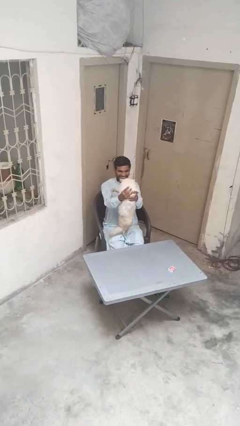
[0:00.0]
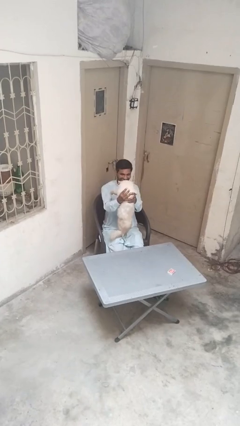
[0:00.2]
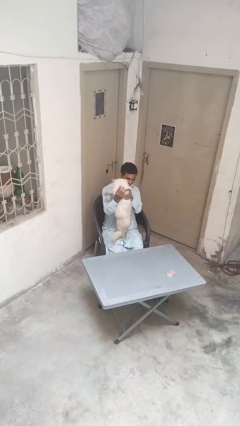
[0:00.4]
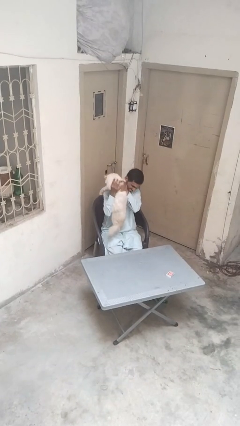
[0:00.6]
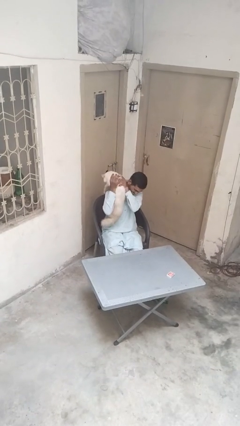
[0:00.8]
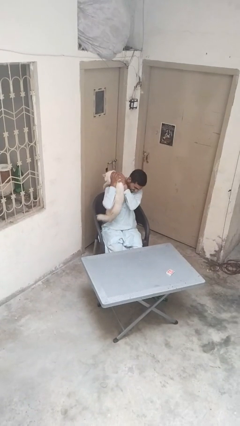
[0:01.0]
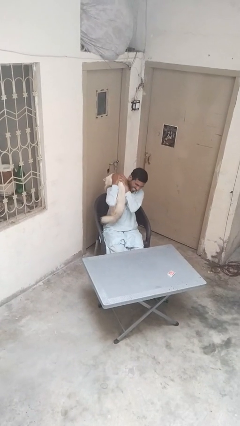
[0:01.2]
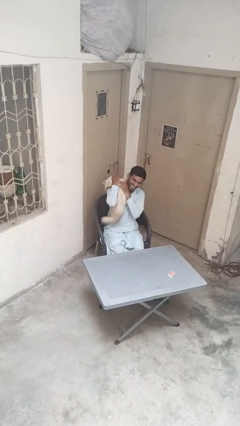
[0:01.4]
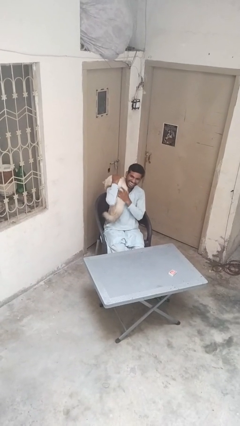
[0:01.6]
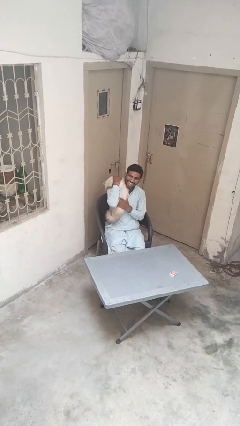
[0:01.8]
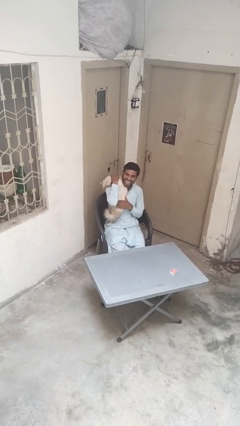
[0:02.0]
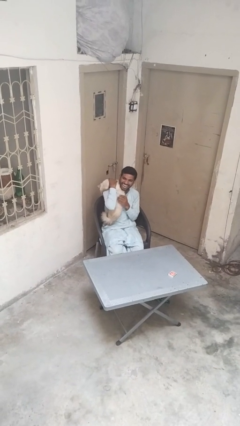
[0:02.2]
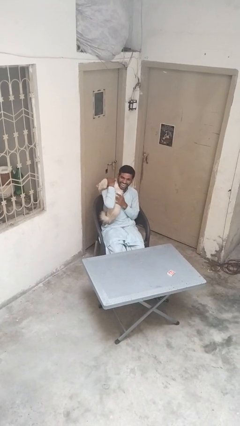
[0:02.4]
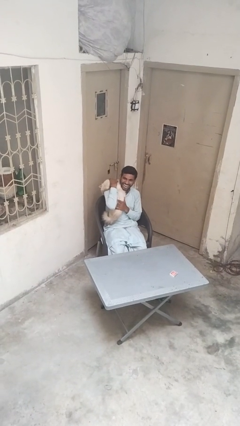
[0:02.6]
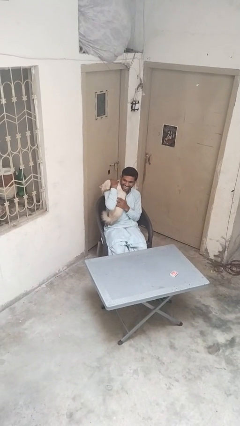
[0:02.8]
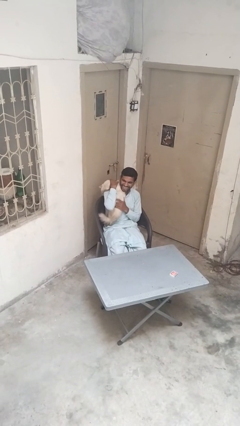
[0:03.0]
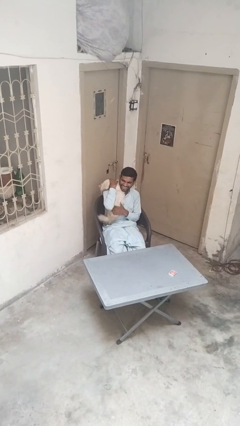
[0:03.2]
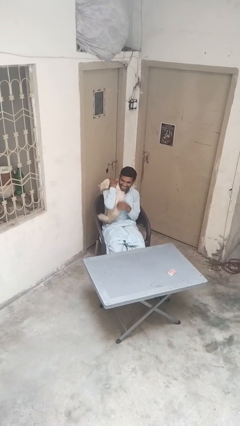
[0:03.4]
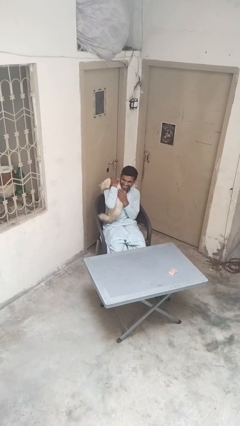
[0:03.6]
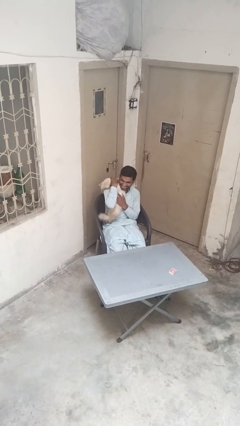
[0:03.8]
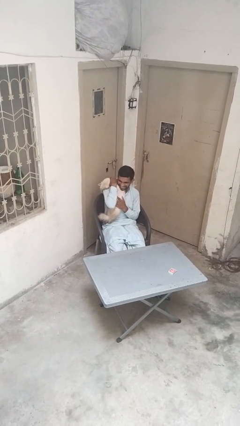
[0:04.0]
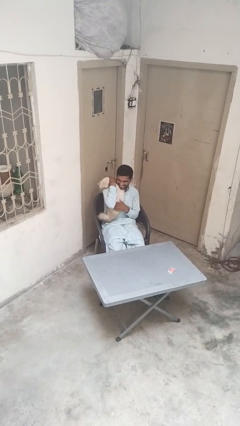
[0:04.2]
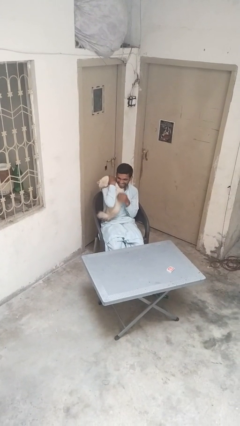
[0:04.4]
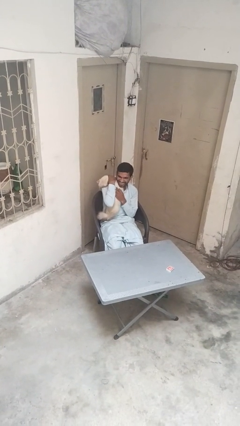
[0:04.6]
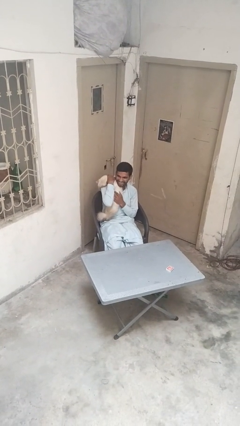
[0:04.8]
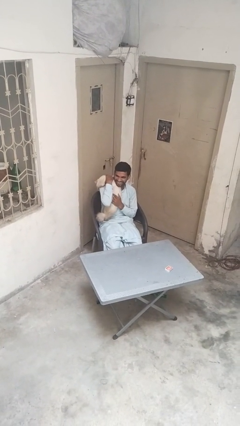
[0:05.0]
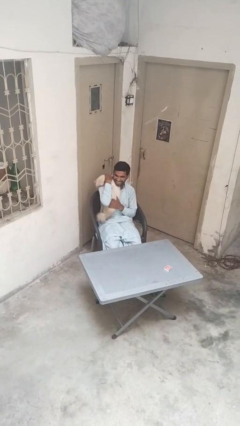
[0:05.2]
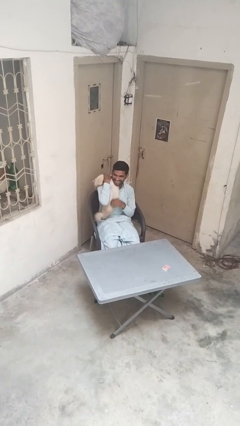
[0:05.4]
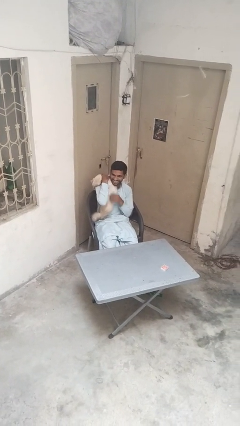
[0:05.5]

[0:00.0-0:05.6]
person hugs cat

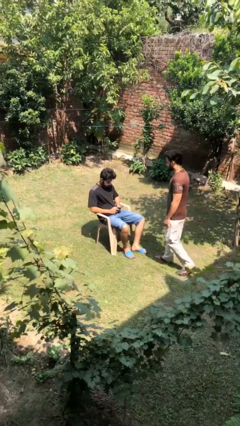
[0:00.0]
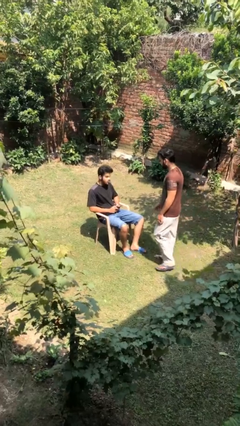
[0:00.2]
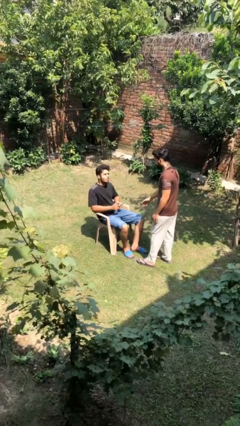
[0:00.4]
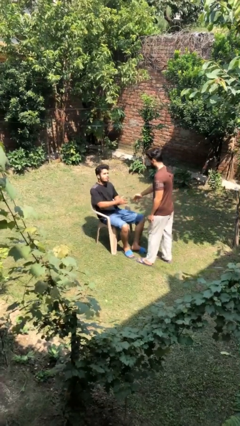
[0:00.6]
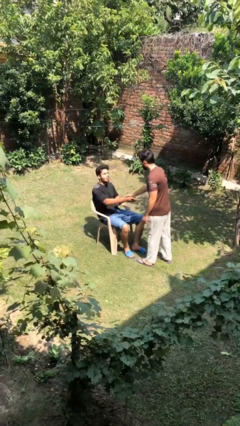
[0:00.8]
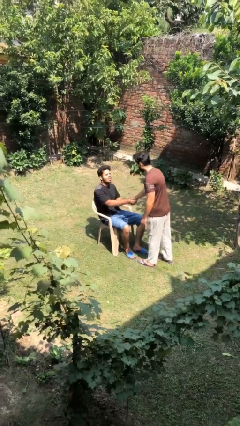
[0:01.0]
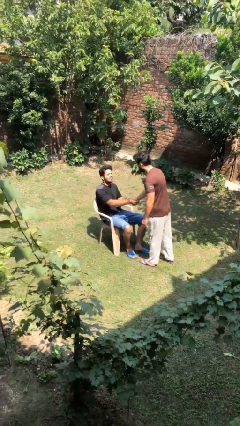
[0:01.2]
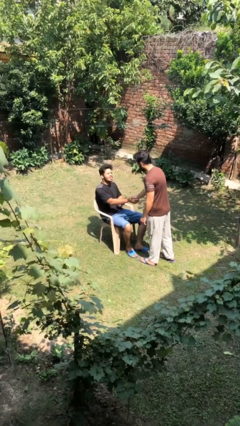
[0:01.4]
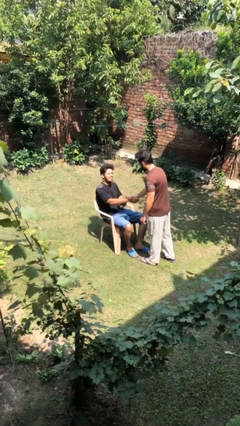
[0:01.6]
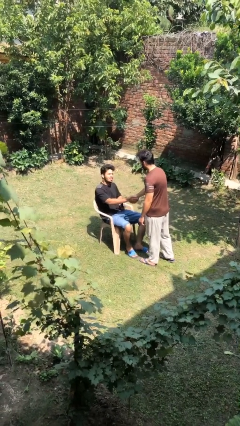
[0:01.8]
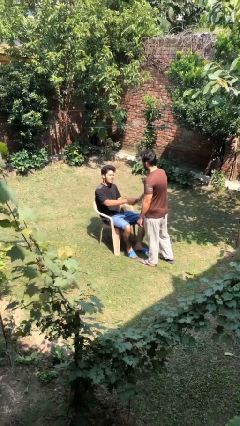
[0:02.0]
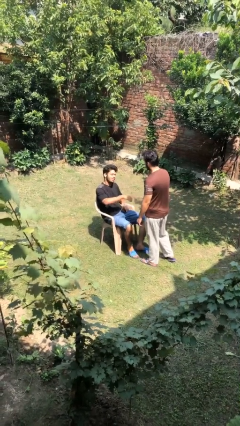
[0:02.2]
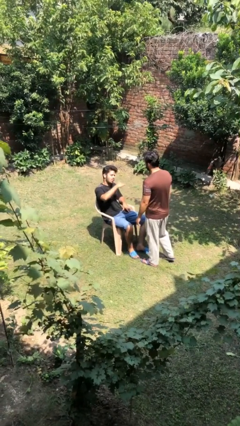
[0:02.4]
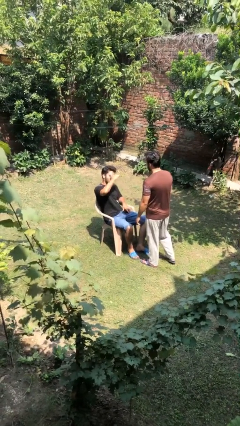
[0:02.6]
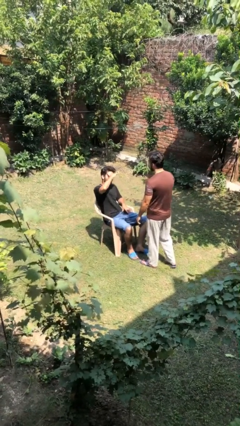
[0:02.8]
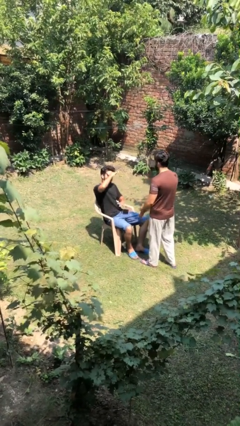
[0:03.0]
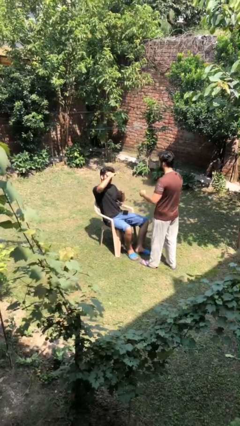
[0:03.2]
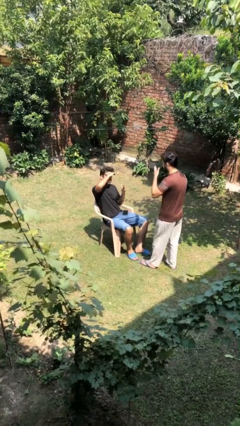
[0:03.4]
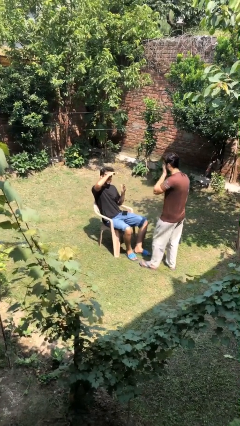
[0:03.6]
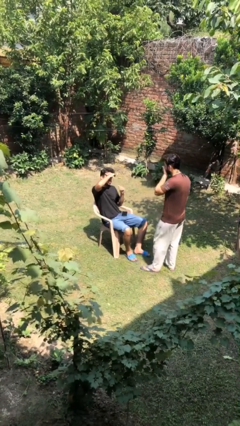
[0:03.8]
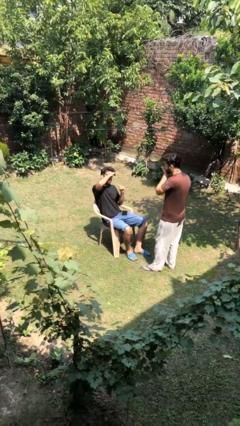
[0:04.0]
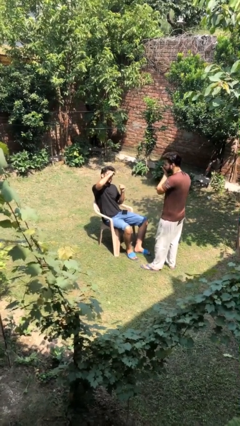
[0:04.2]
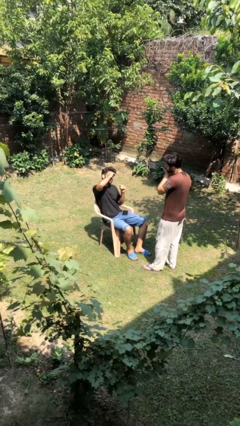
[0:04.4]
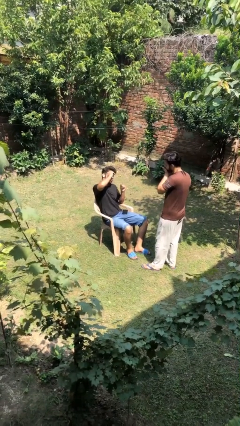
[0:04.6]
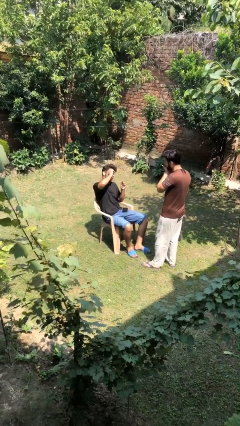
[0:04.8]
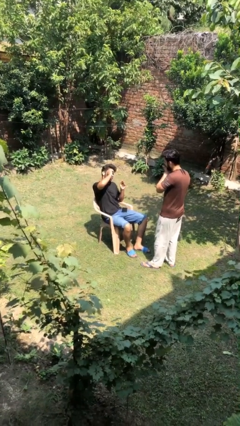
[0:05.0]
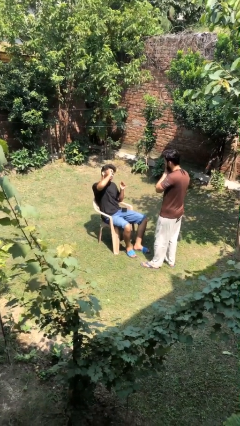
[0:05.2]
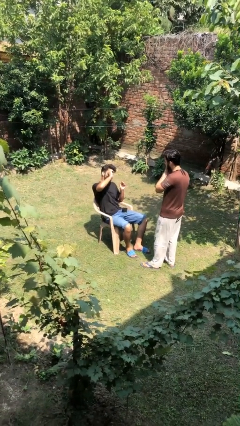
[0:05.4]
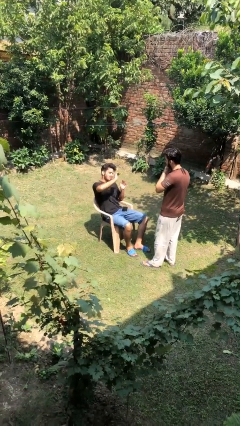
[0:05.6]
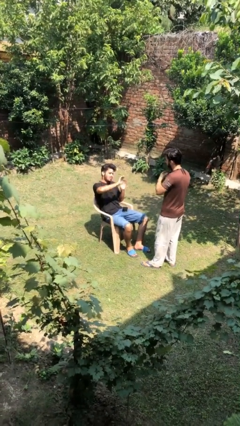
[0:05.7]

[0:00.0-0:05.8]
person shakes hand

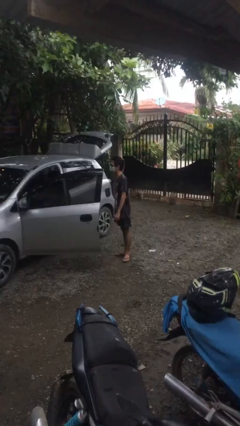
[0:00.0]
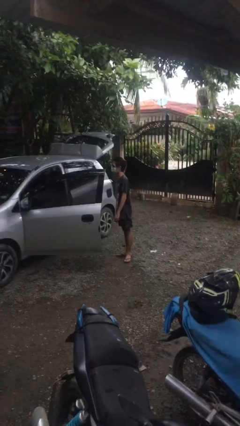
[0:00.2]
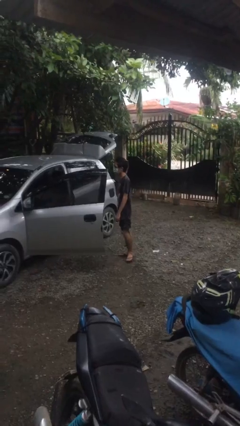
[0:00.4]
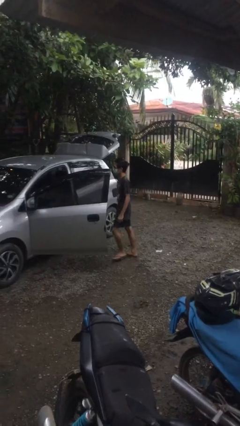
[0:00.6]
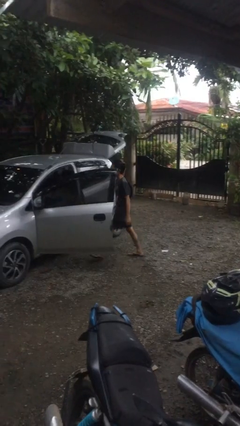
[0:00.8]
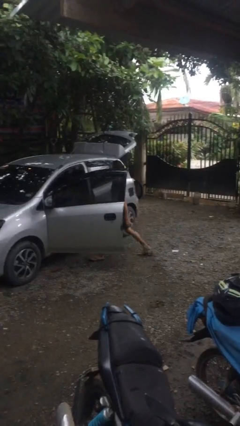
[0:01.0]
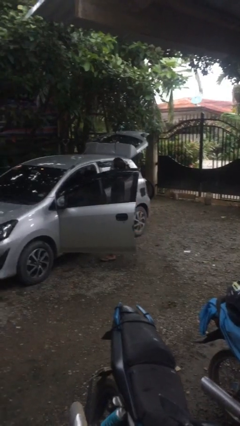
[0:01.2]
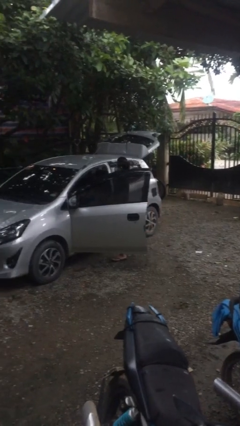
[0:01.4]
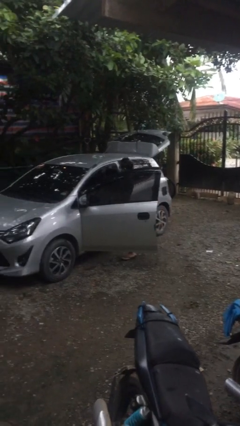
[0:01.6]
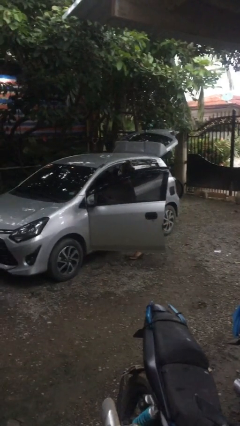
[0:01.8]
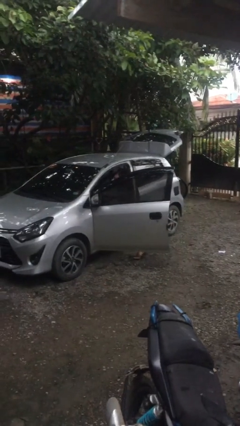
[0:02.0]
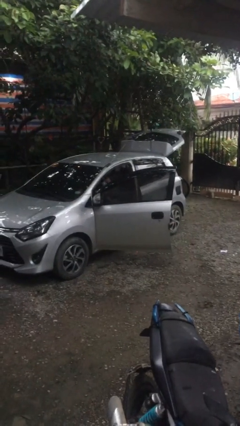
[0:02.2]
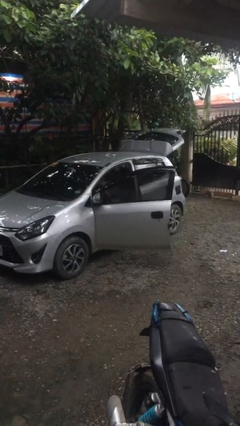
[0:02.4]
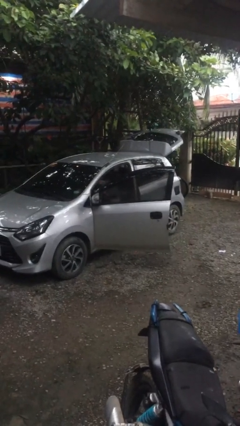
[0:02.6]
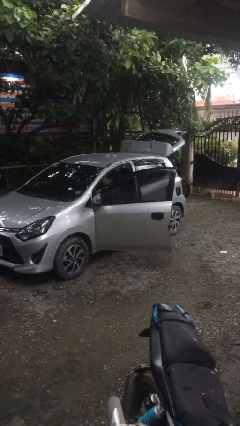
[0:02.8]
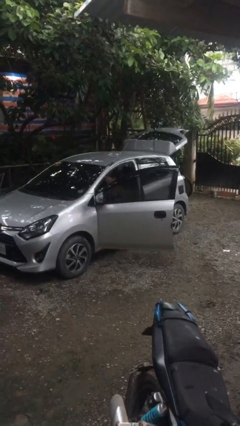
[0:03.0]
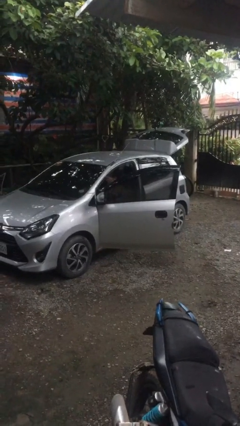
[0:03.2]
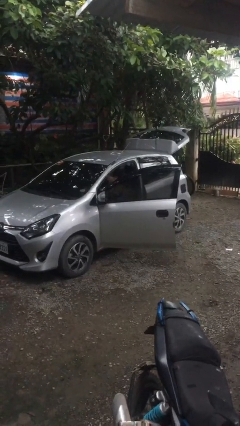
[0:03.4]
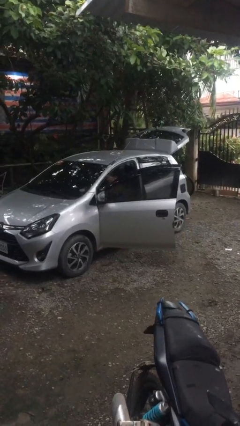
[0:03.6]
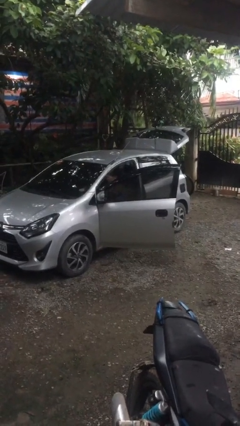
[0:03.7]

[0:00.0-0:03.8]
person enters car

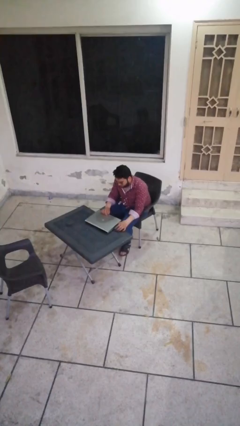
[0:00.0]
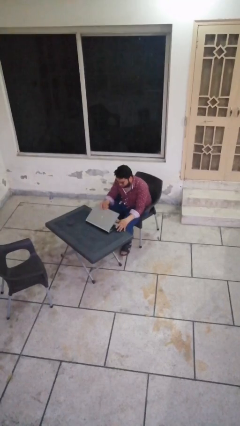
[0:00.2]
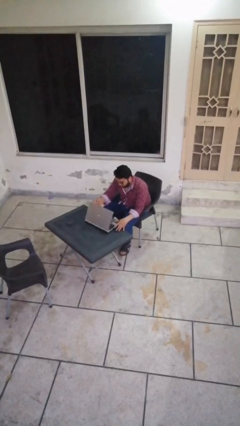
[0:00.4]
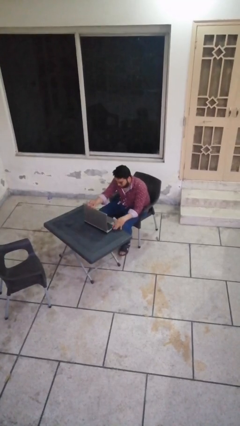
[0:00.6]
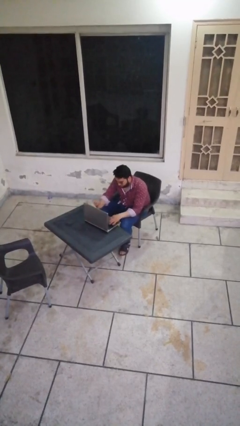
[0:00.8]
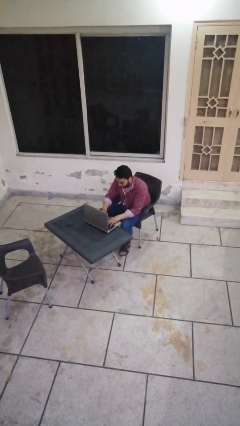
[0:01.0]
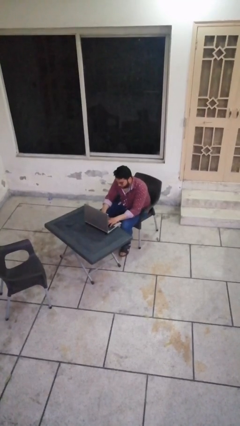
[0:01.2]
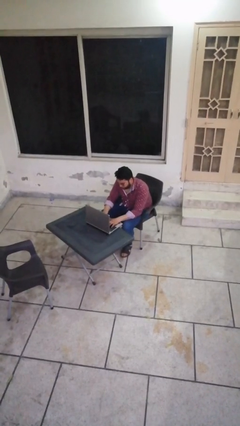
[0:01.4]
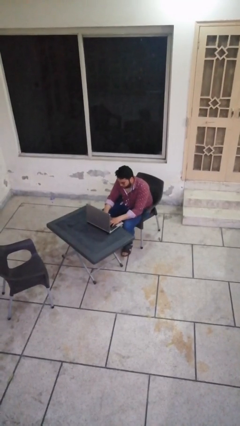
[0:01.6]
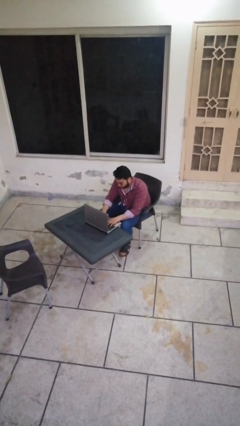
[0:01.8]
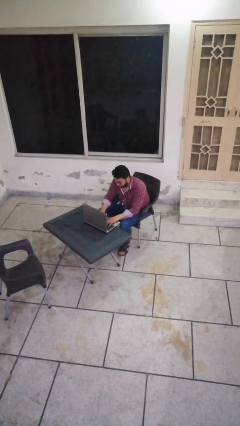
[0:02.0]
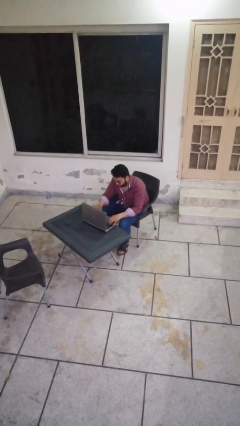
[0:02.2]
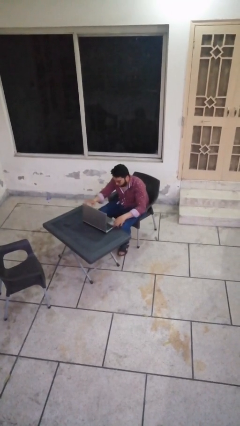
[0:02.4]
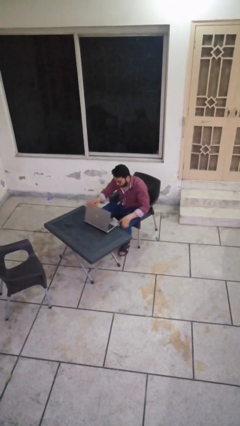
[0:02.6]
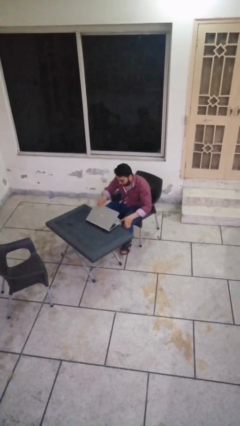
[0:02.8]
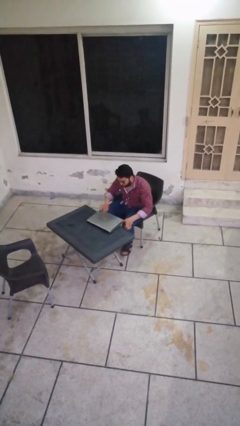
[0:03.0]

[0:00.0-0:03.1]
person interacts with laptop
